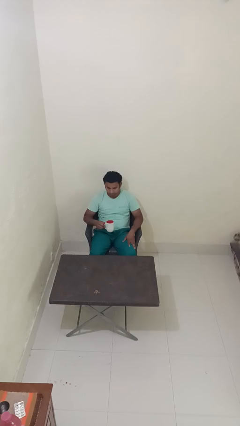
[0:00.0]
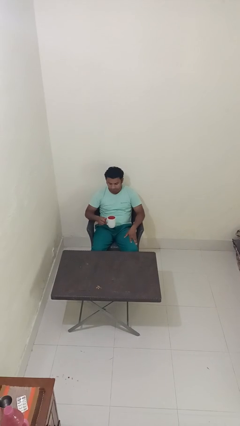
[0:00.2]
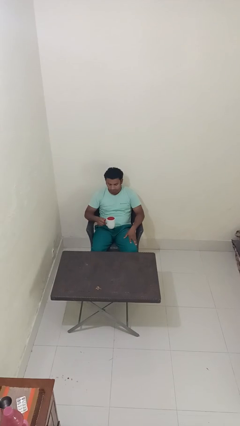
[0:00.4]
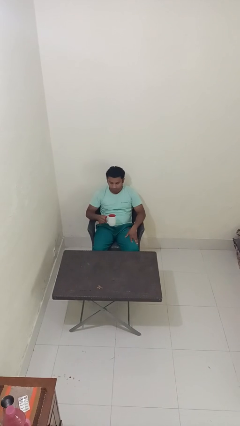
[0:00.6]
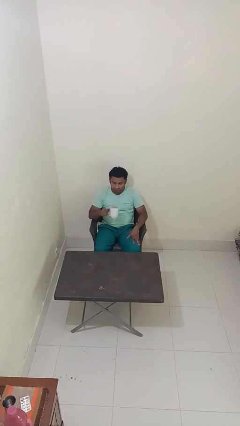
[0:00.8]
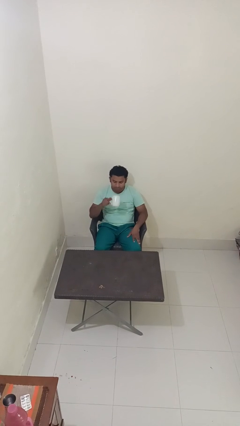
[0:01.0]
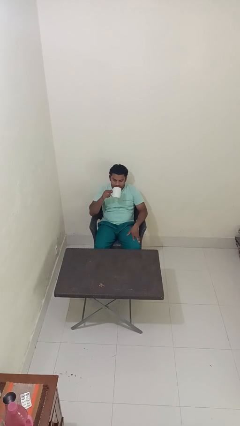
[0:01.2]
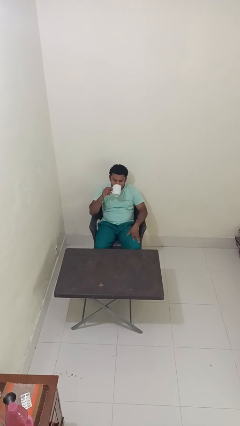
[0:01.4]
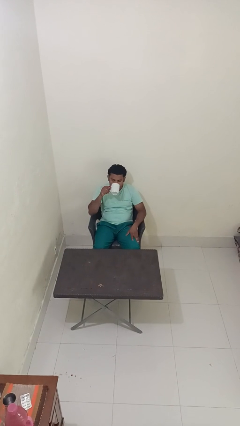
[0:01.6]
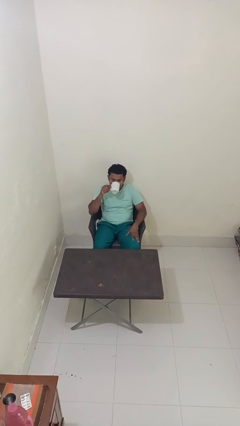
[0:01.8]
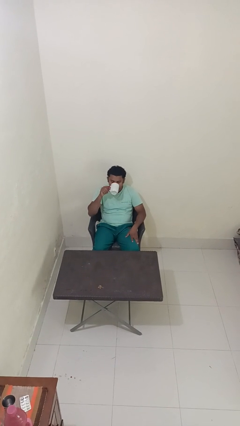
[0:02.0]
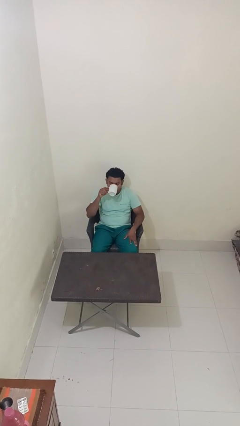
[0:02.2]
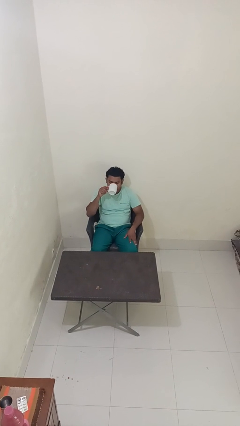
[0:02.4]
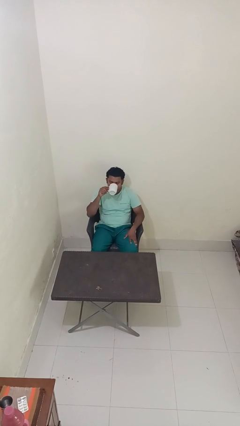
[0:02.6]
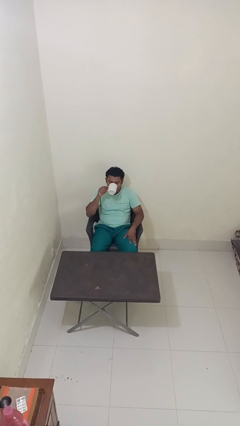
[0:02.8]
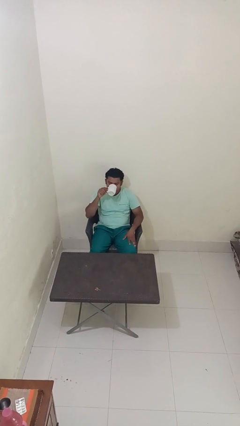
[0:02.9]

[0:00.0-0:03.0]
person drinks from mug

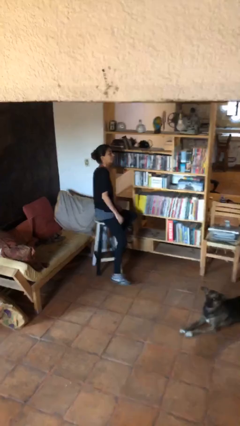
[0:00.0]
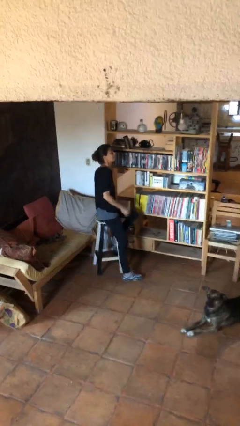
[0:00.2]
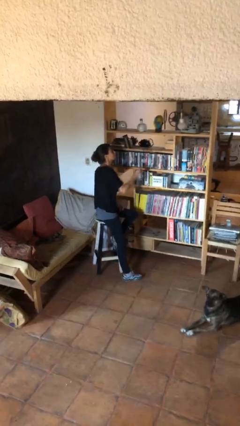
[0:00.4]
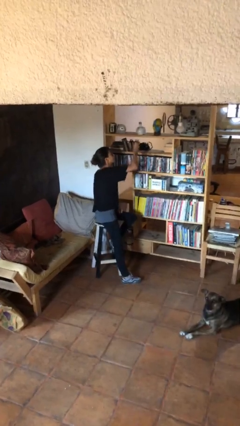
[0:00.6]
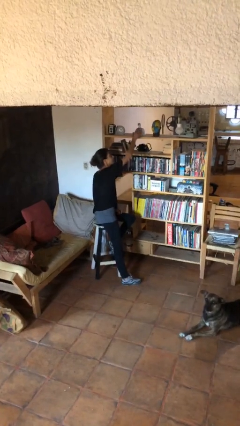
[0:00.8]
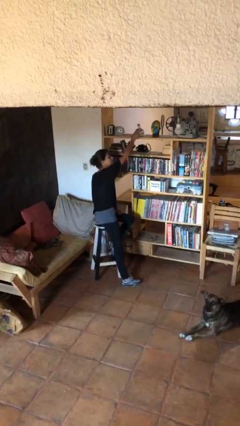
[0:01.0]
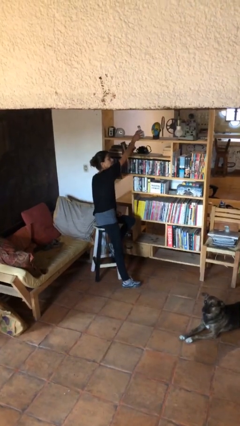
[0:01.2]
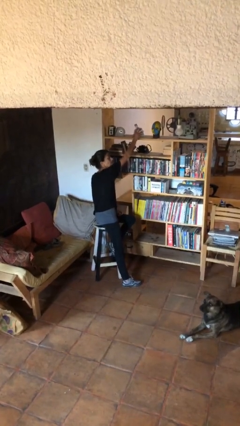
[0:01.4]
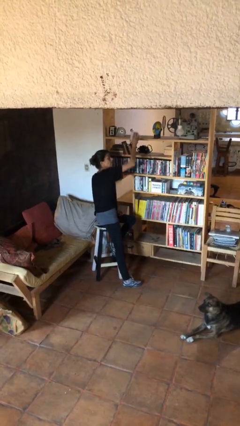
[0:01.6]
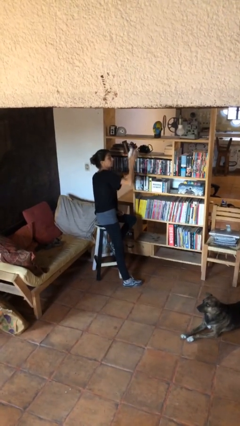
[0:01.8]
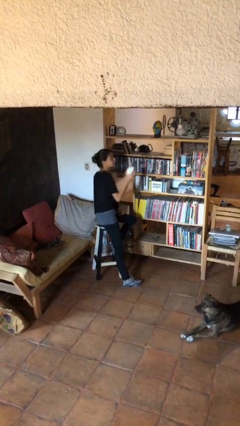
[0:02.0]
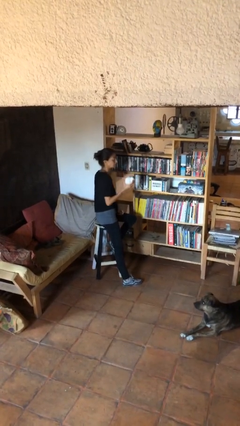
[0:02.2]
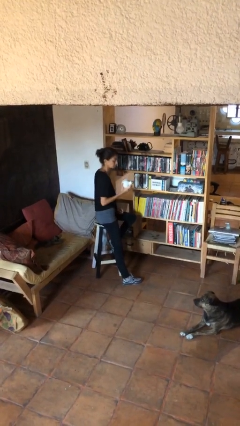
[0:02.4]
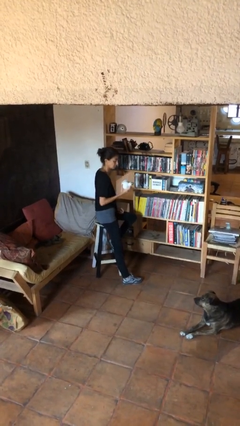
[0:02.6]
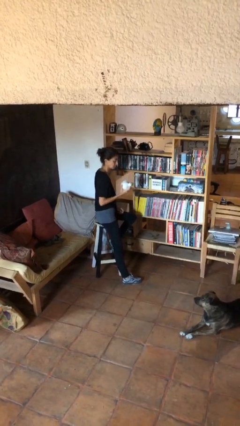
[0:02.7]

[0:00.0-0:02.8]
person picks up object from countertop

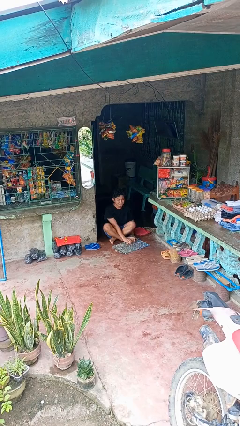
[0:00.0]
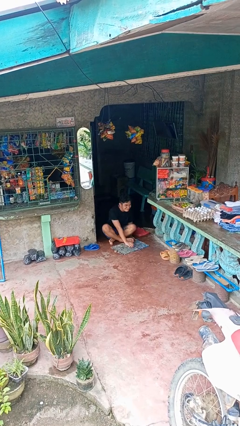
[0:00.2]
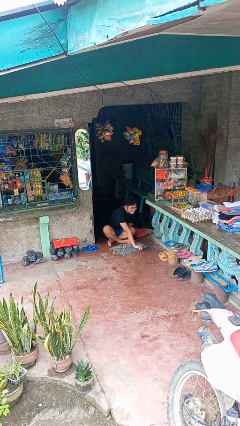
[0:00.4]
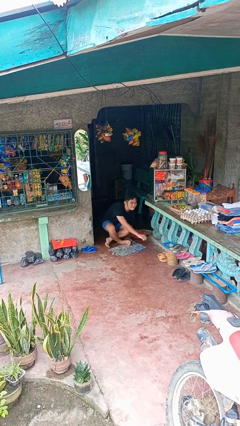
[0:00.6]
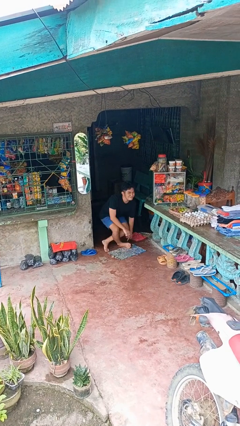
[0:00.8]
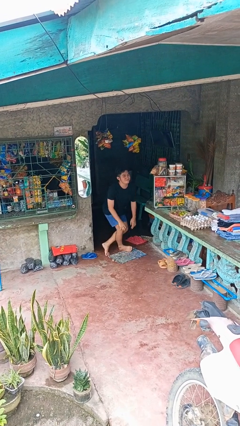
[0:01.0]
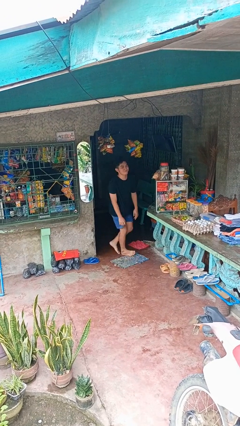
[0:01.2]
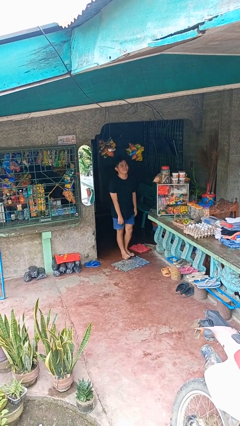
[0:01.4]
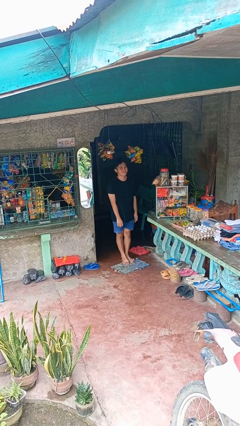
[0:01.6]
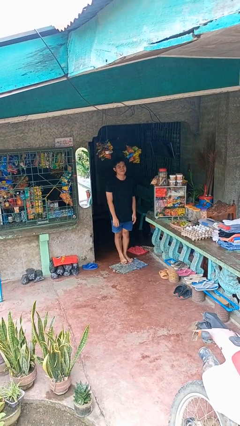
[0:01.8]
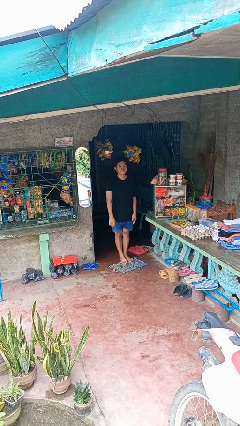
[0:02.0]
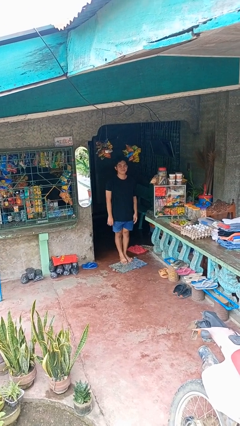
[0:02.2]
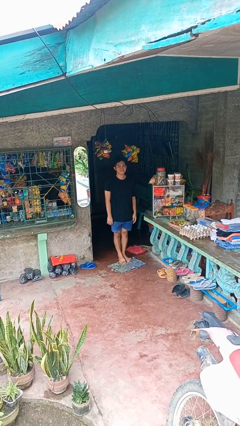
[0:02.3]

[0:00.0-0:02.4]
person stands up from floor

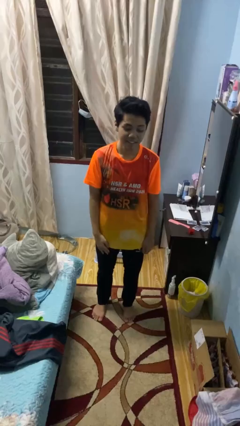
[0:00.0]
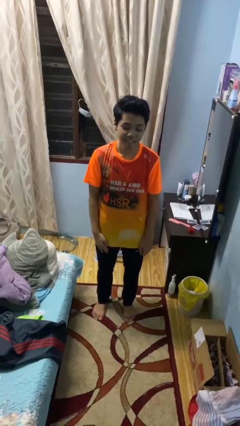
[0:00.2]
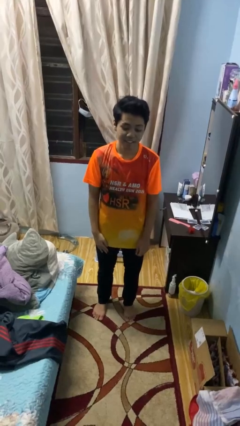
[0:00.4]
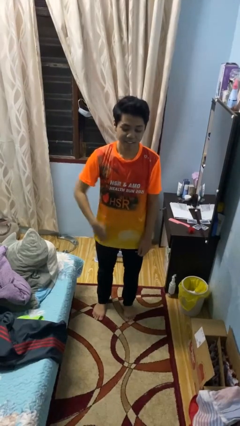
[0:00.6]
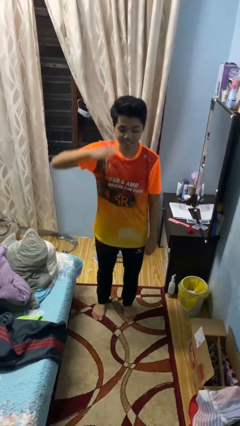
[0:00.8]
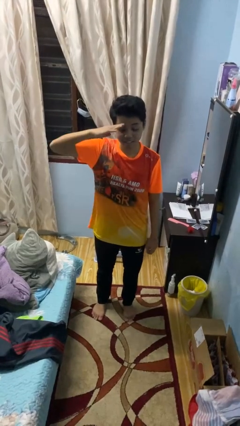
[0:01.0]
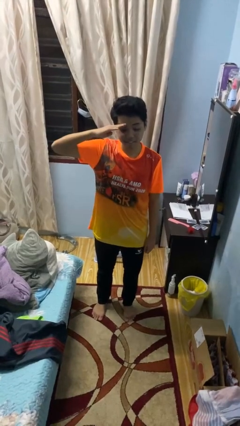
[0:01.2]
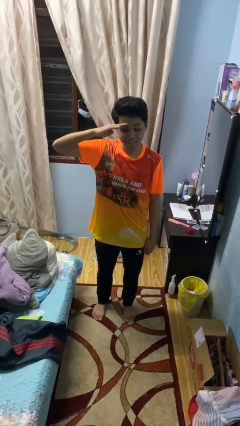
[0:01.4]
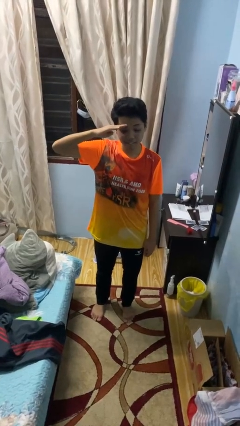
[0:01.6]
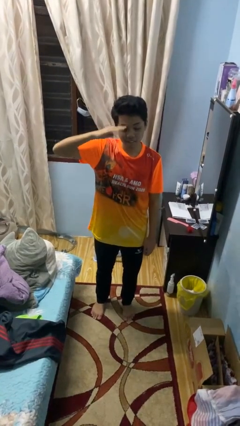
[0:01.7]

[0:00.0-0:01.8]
person salutes

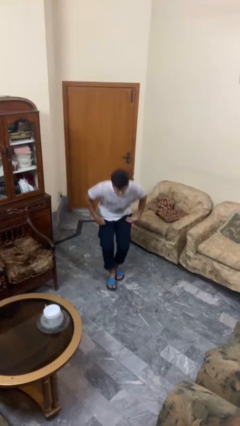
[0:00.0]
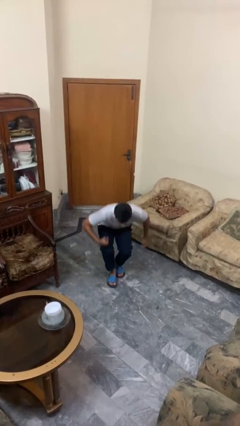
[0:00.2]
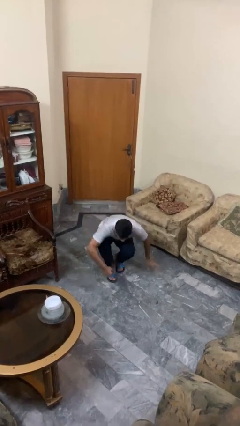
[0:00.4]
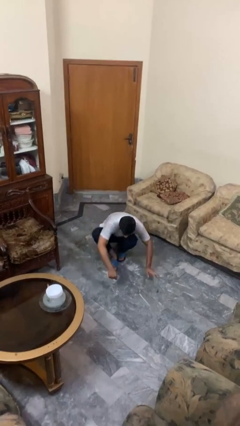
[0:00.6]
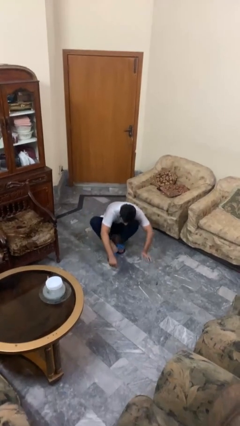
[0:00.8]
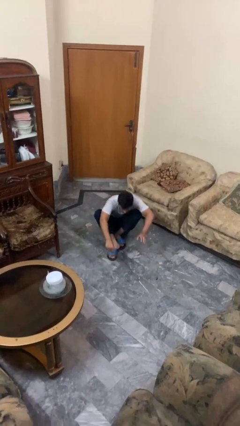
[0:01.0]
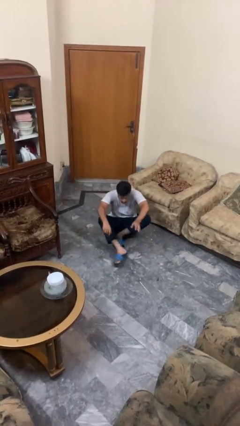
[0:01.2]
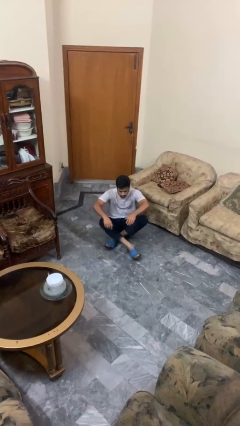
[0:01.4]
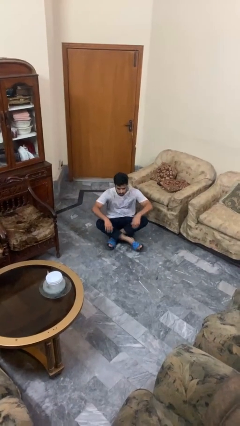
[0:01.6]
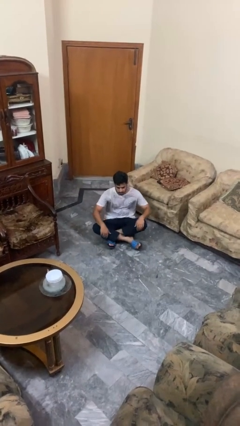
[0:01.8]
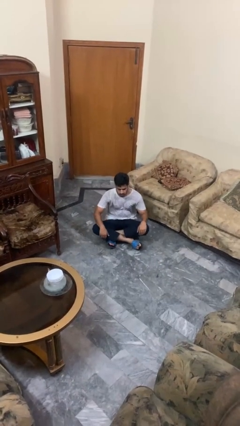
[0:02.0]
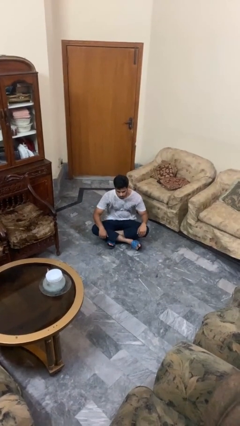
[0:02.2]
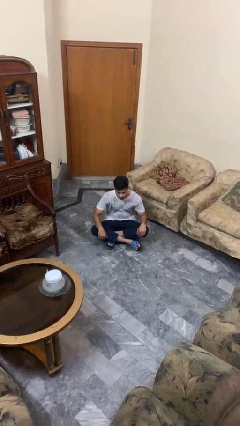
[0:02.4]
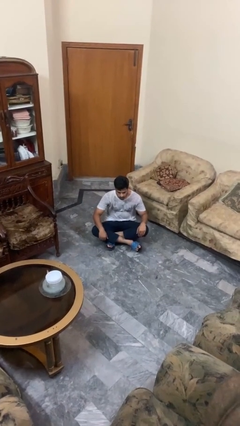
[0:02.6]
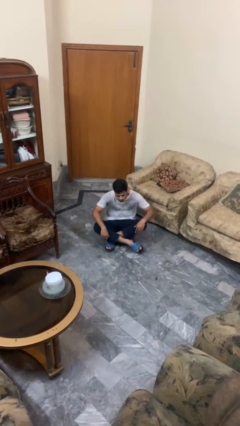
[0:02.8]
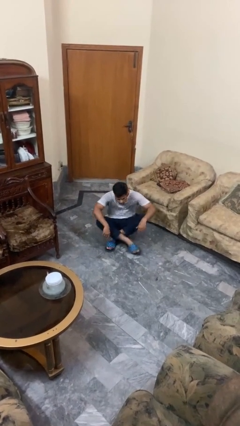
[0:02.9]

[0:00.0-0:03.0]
person sits crisscross

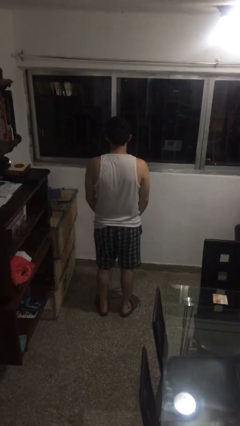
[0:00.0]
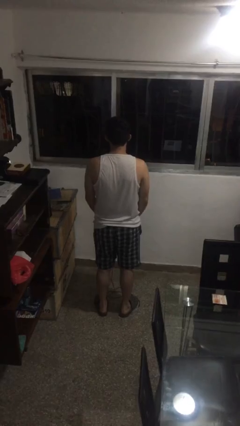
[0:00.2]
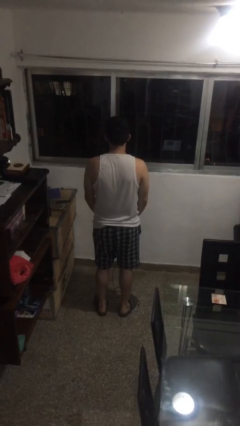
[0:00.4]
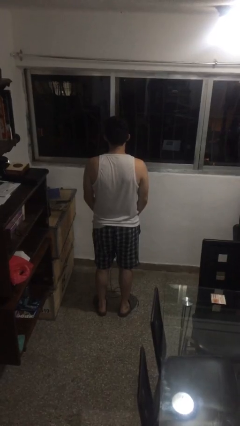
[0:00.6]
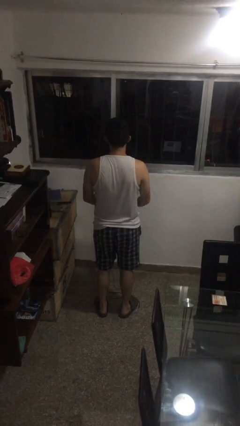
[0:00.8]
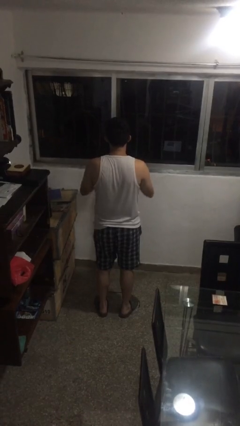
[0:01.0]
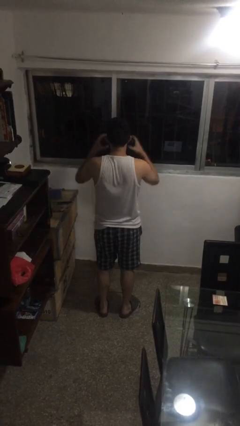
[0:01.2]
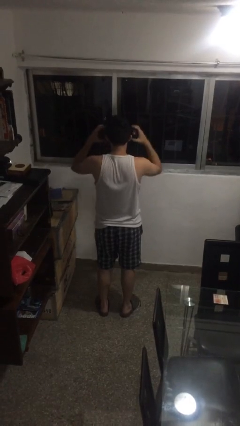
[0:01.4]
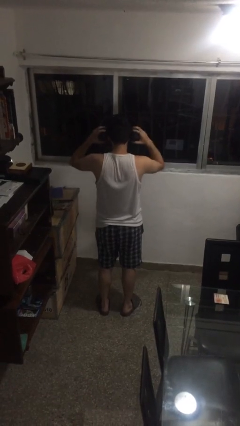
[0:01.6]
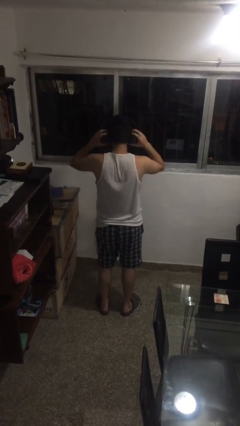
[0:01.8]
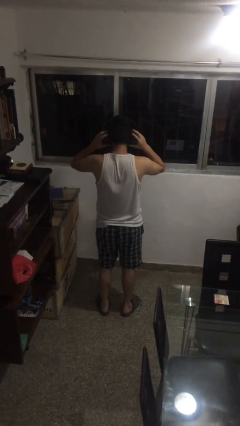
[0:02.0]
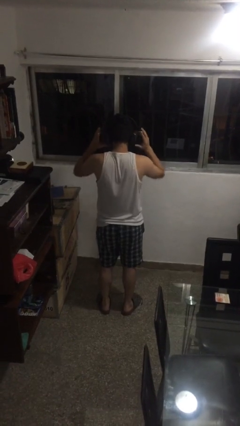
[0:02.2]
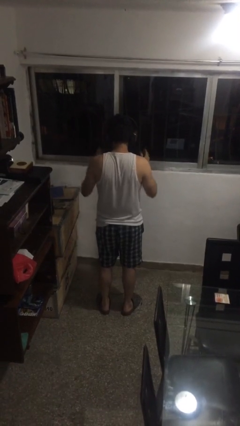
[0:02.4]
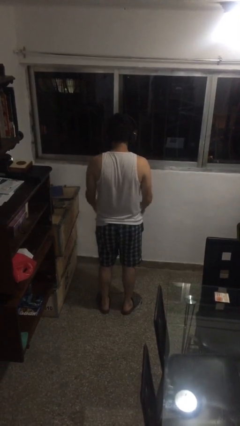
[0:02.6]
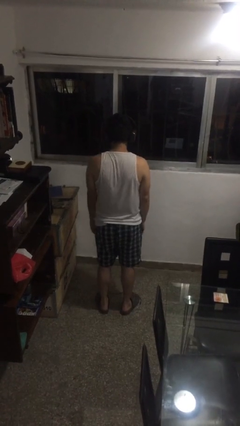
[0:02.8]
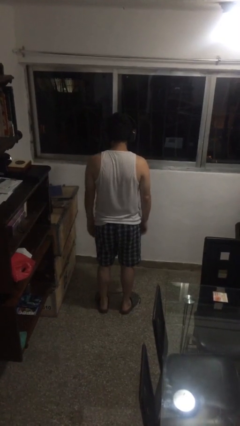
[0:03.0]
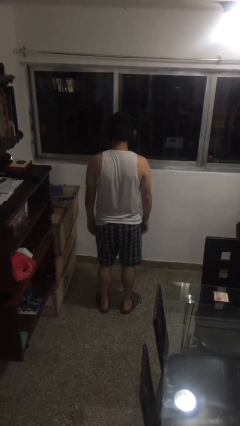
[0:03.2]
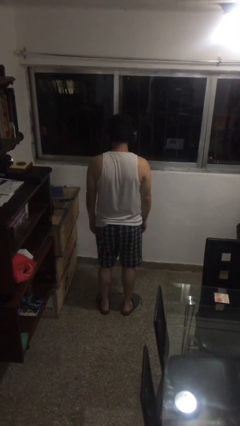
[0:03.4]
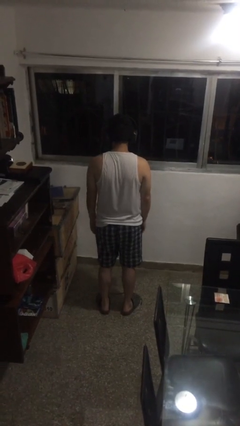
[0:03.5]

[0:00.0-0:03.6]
person puts on headphones

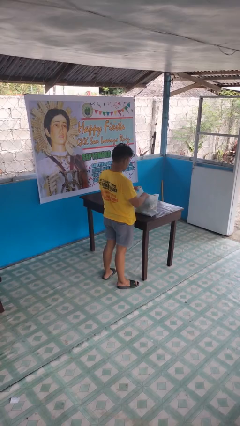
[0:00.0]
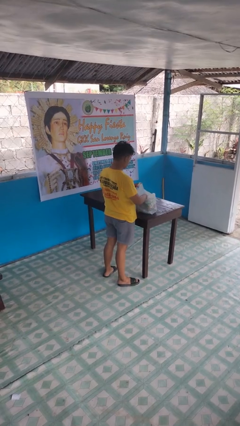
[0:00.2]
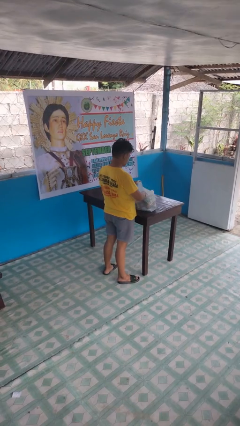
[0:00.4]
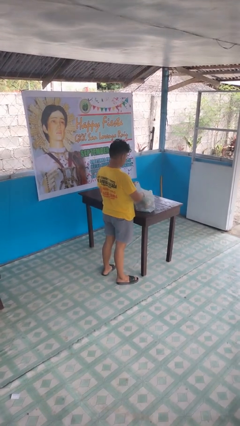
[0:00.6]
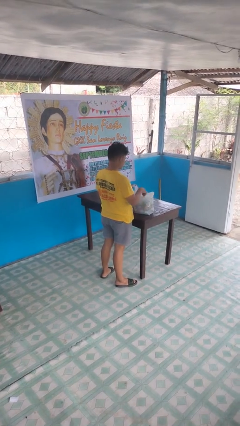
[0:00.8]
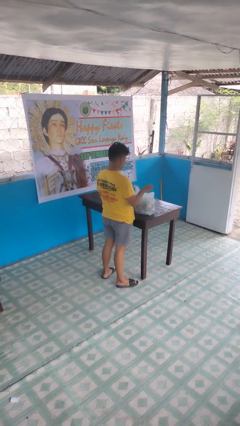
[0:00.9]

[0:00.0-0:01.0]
person puts object into bag
